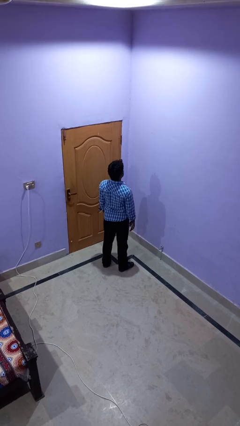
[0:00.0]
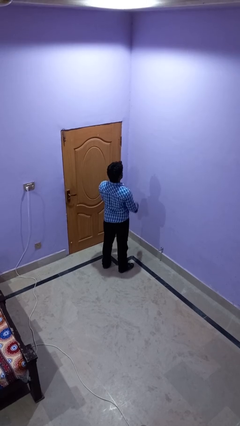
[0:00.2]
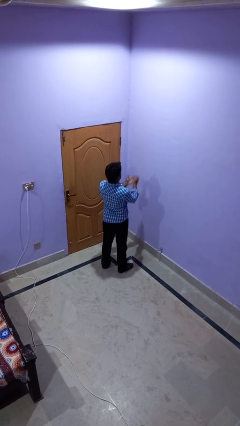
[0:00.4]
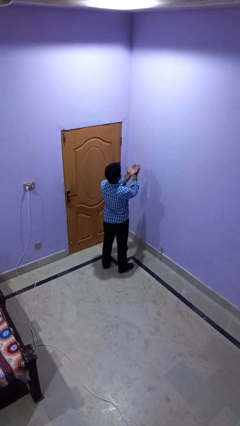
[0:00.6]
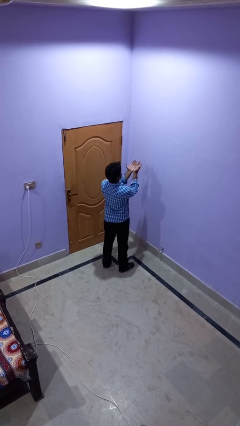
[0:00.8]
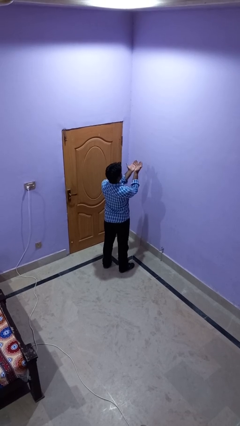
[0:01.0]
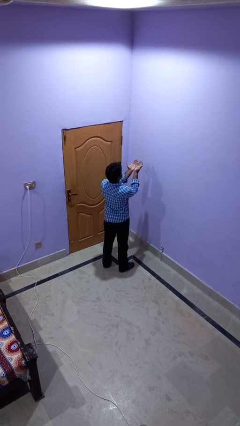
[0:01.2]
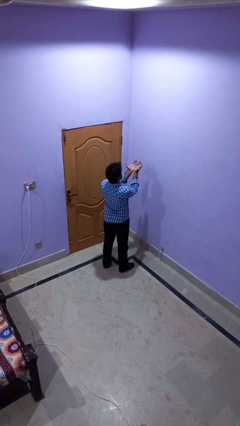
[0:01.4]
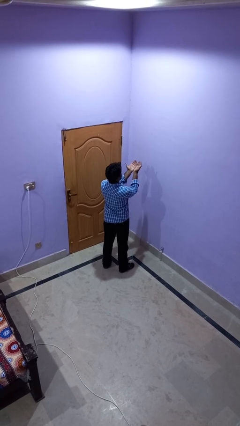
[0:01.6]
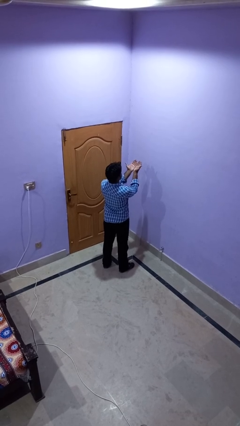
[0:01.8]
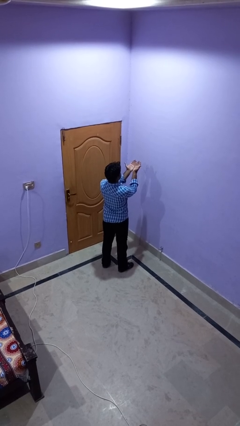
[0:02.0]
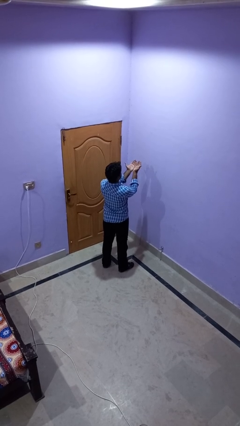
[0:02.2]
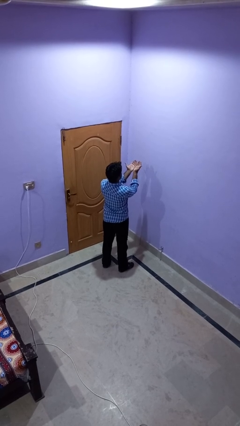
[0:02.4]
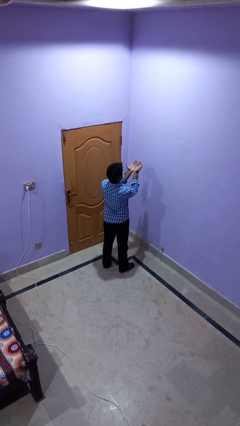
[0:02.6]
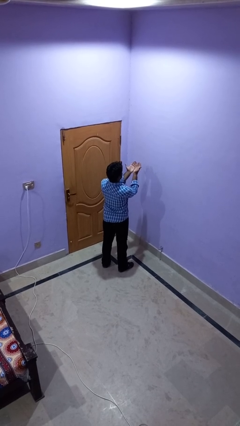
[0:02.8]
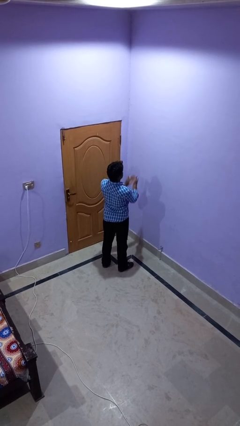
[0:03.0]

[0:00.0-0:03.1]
person prays

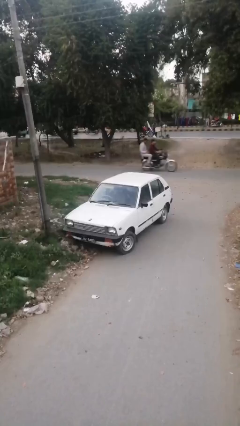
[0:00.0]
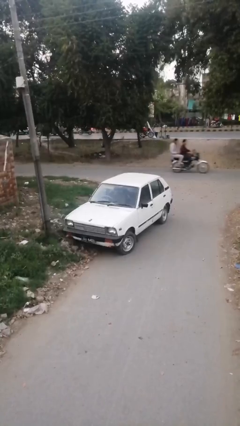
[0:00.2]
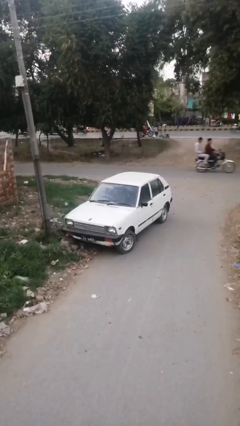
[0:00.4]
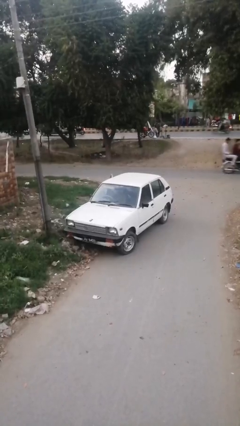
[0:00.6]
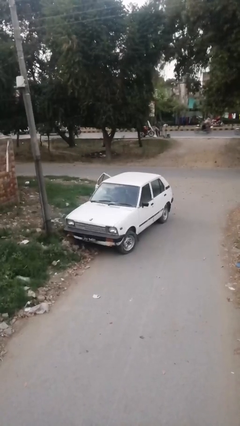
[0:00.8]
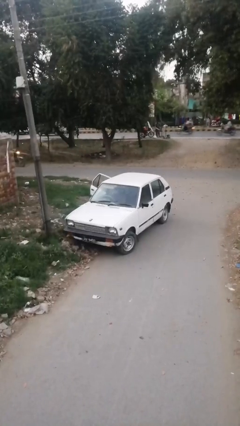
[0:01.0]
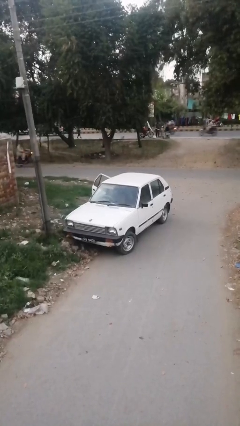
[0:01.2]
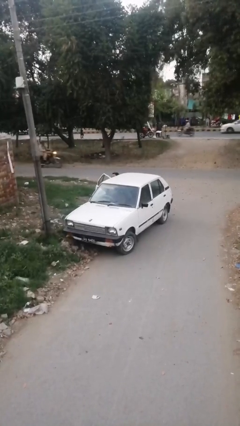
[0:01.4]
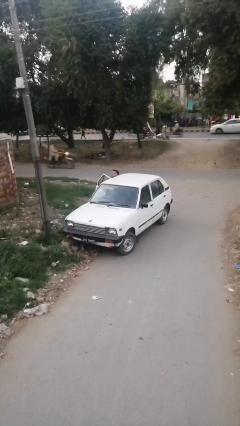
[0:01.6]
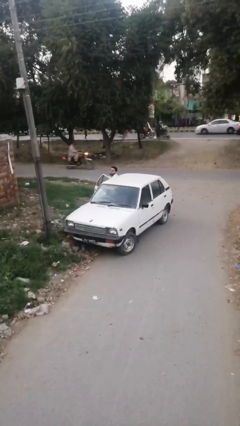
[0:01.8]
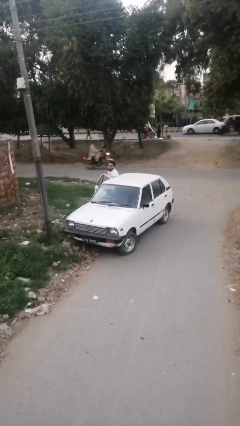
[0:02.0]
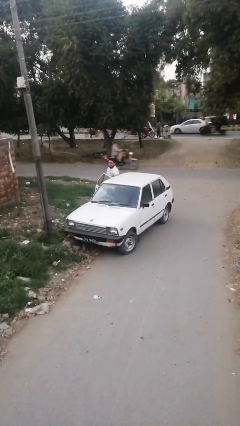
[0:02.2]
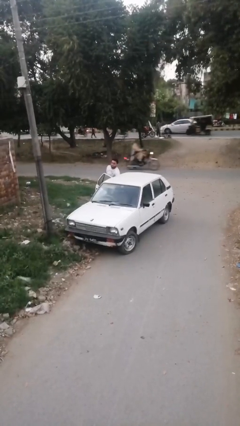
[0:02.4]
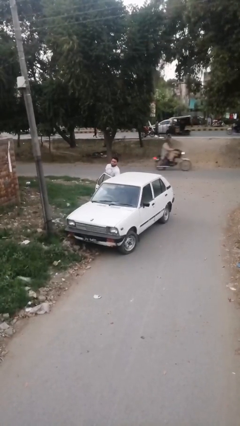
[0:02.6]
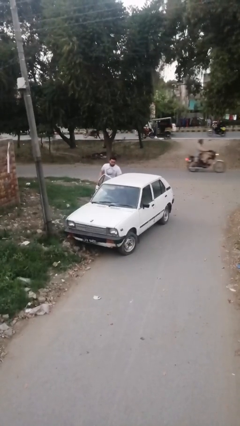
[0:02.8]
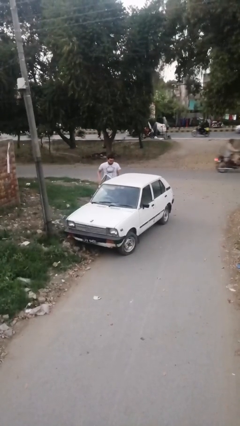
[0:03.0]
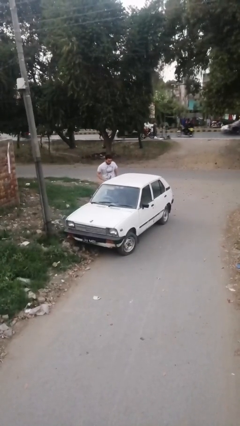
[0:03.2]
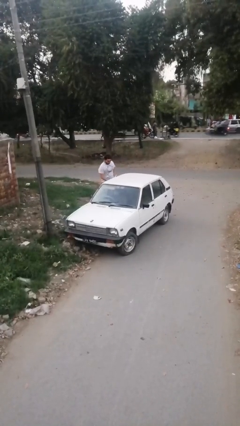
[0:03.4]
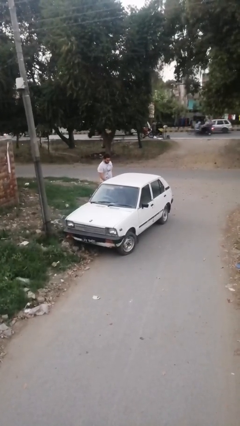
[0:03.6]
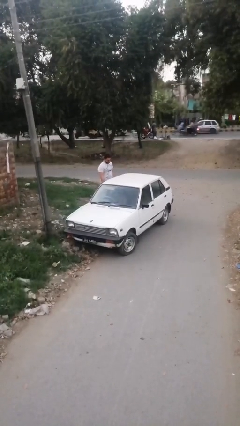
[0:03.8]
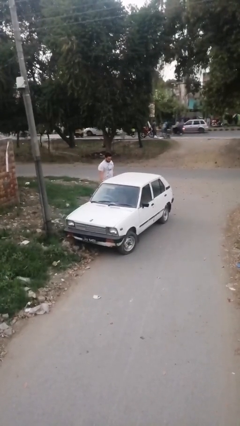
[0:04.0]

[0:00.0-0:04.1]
car drops off person

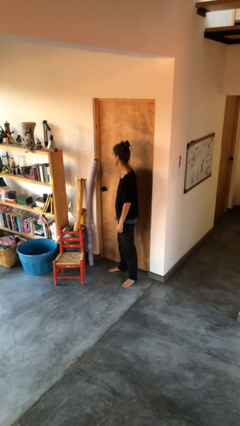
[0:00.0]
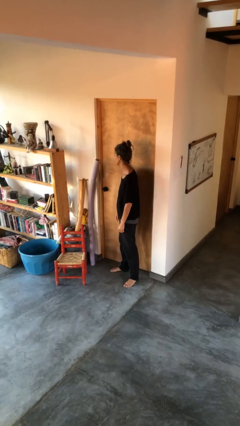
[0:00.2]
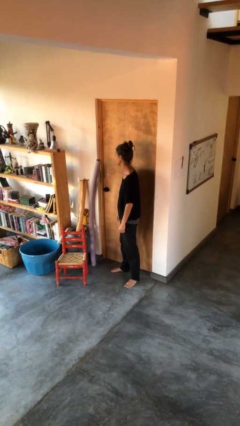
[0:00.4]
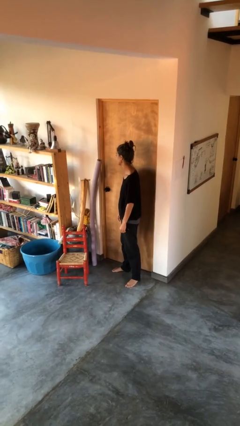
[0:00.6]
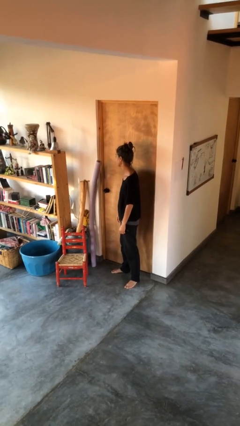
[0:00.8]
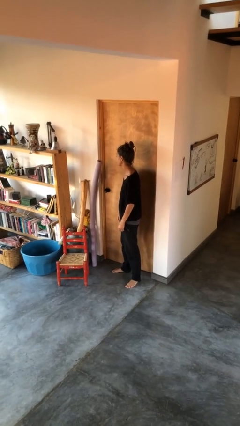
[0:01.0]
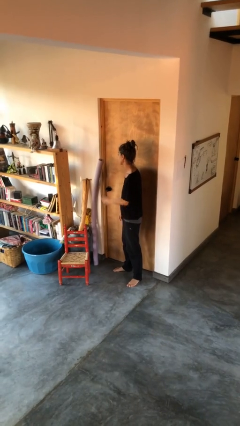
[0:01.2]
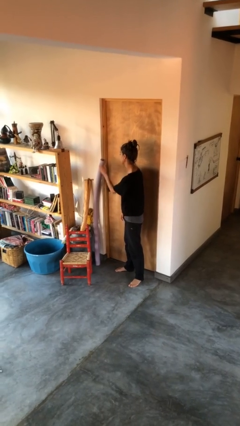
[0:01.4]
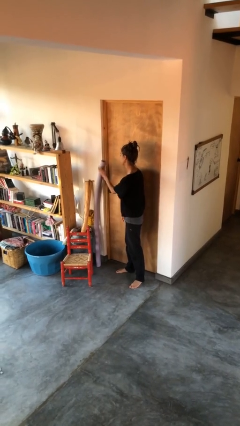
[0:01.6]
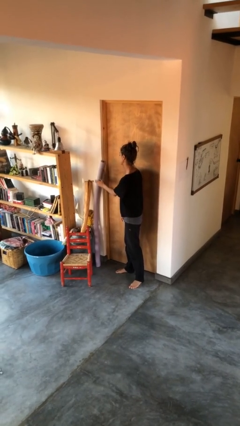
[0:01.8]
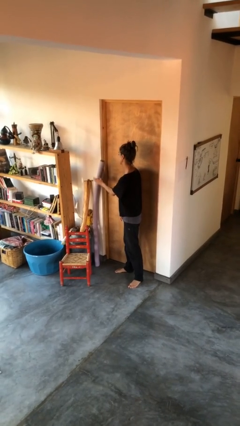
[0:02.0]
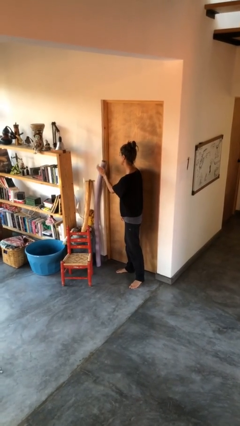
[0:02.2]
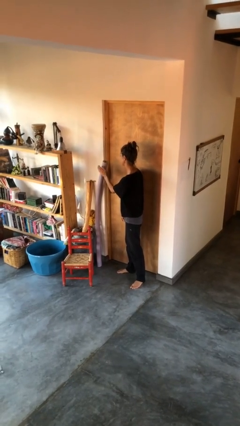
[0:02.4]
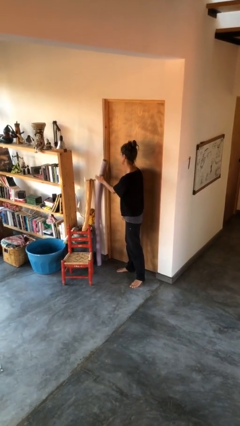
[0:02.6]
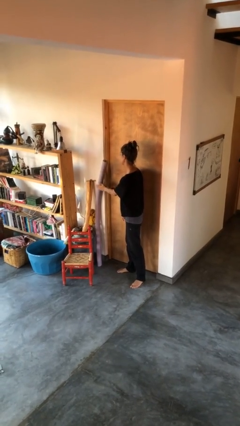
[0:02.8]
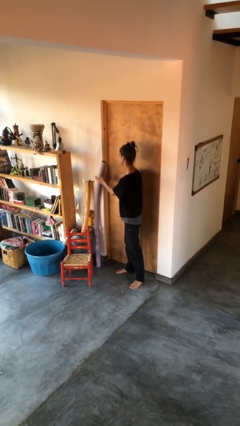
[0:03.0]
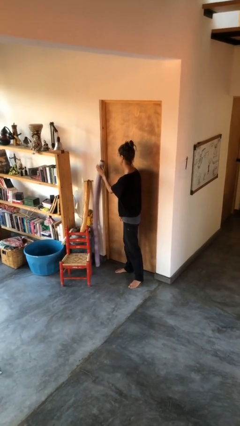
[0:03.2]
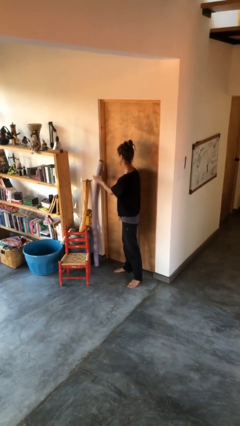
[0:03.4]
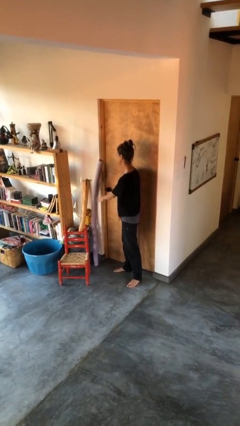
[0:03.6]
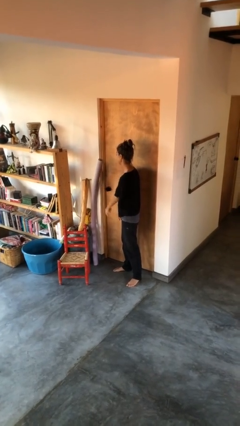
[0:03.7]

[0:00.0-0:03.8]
person waves hand over object

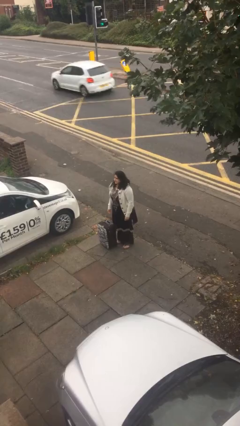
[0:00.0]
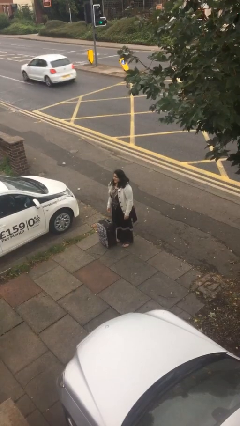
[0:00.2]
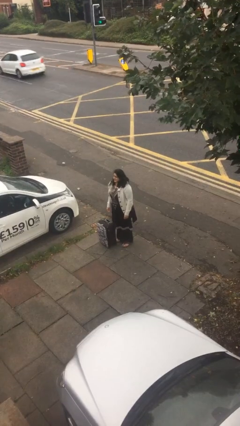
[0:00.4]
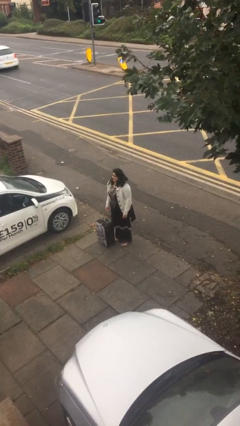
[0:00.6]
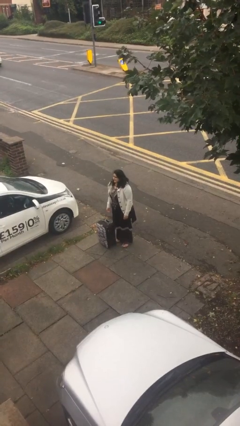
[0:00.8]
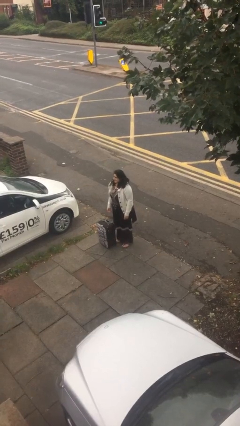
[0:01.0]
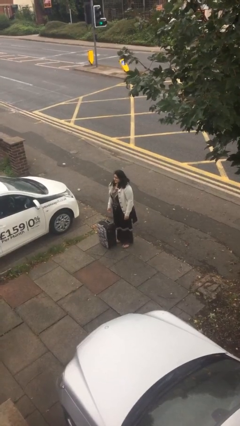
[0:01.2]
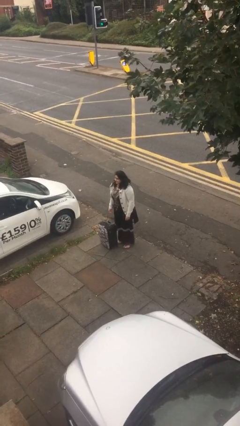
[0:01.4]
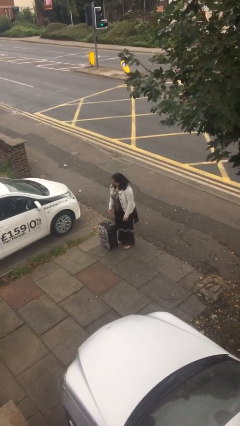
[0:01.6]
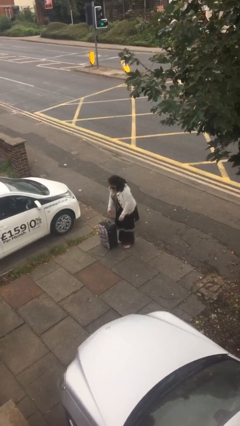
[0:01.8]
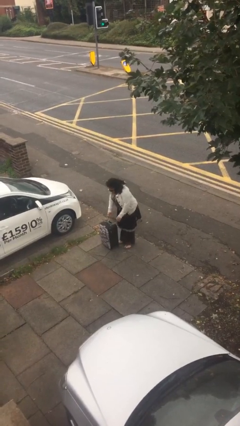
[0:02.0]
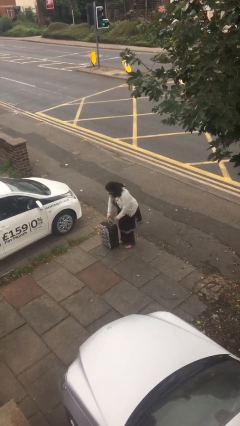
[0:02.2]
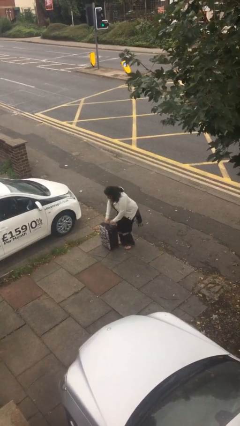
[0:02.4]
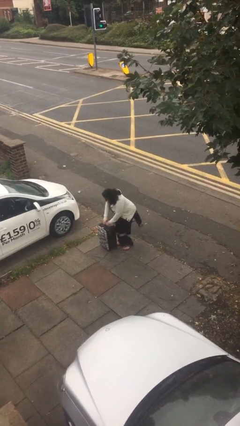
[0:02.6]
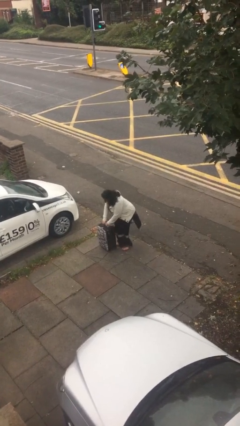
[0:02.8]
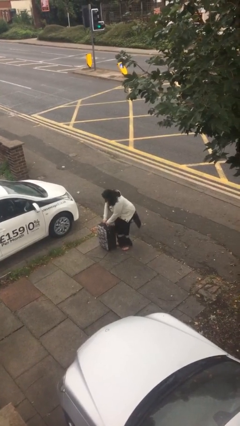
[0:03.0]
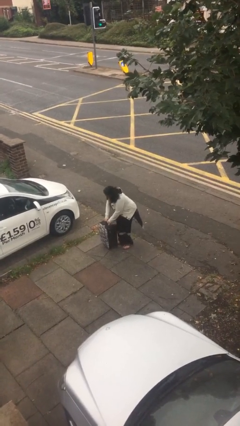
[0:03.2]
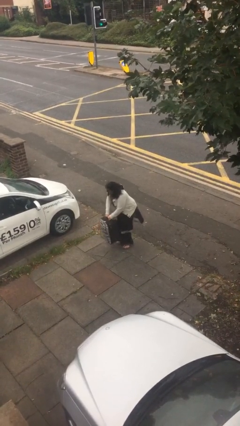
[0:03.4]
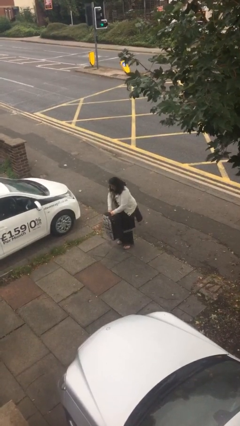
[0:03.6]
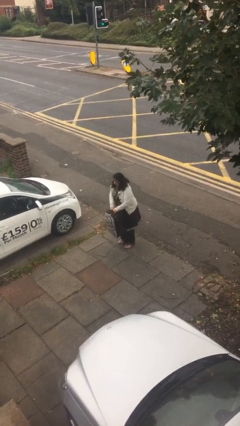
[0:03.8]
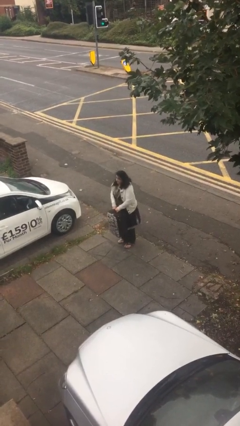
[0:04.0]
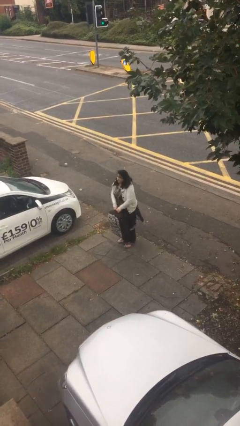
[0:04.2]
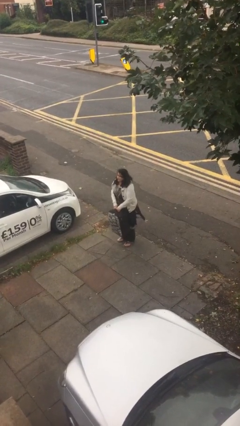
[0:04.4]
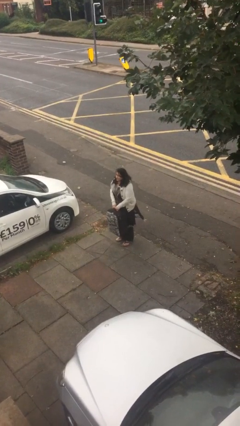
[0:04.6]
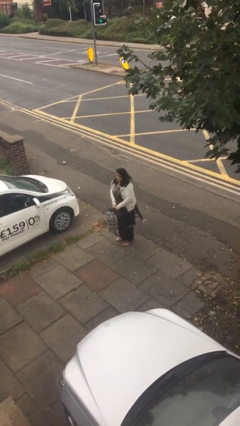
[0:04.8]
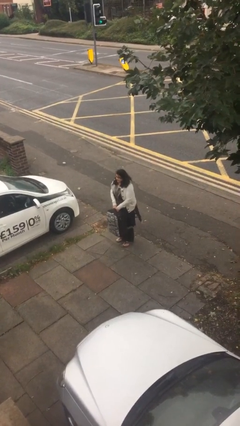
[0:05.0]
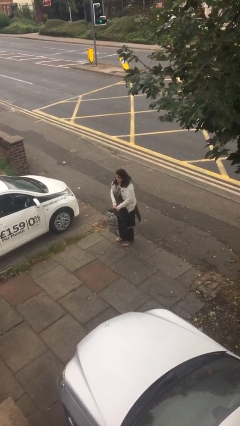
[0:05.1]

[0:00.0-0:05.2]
person picks up object from floor

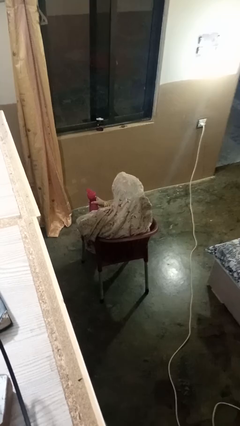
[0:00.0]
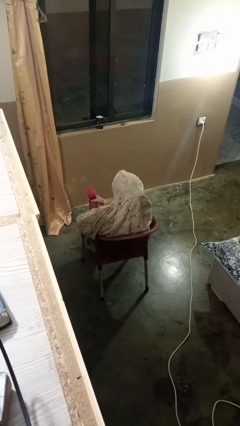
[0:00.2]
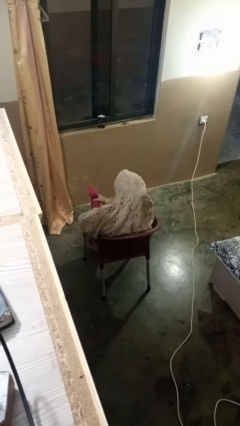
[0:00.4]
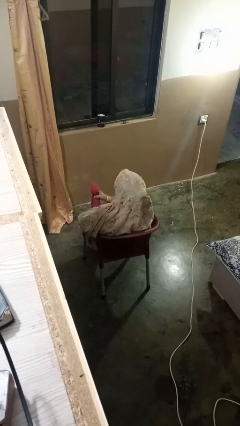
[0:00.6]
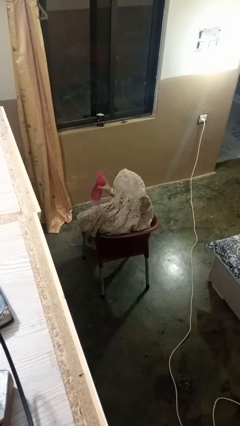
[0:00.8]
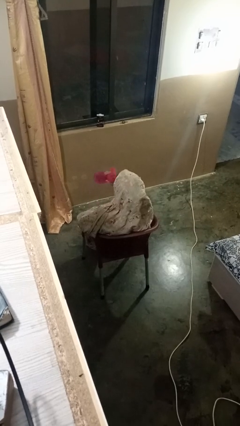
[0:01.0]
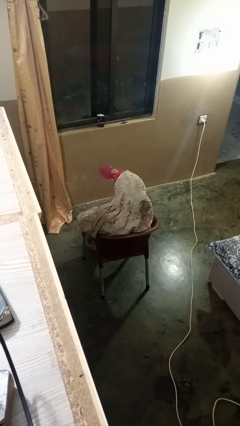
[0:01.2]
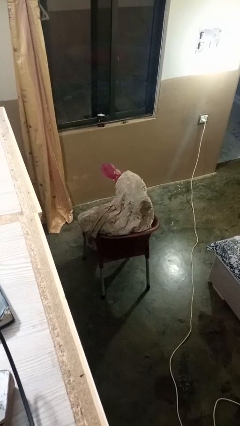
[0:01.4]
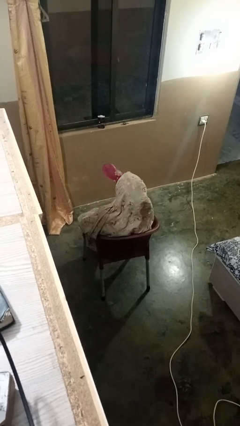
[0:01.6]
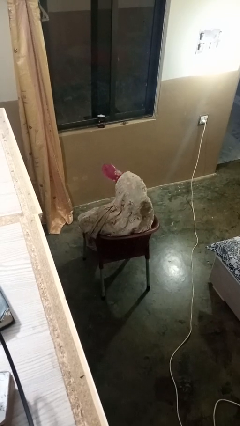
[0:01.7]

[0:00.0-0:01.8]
person drinks from bottle
